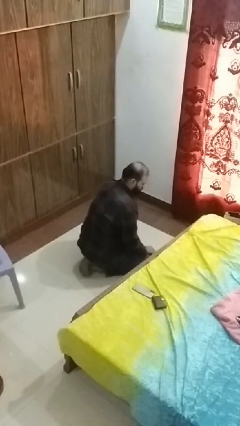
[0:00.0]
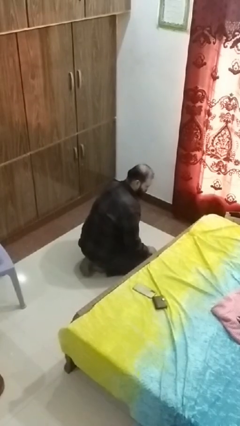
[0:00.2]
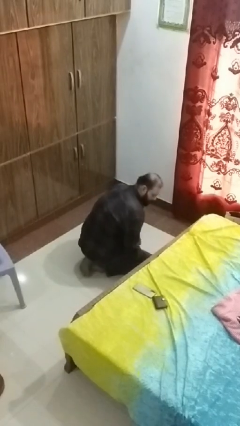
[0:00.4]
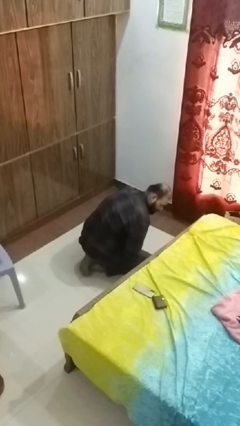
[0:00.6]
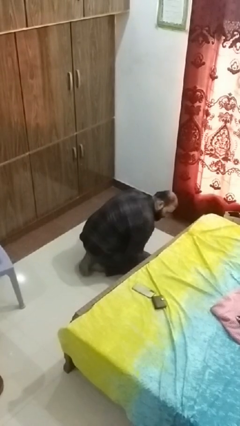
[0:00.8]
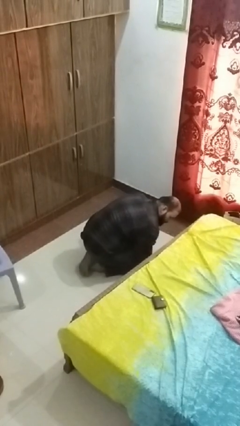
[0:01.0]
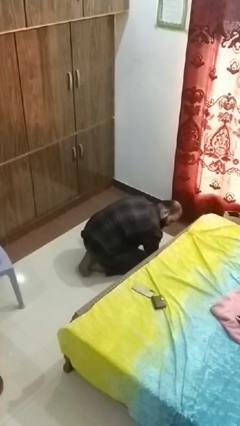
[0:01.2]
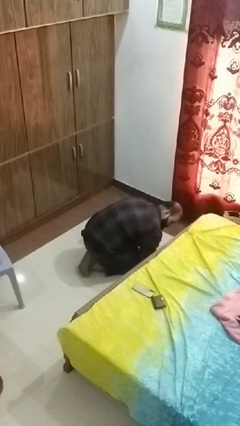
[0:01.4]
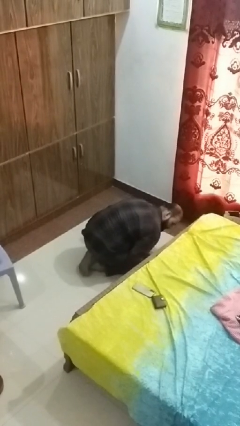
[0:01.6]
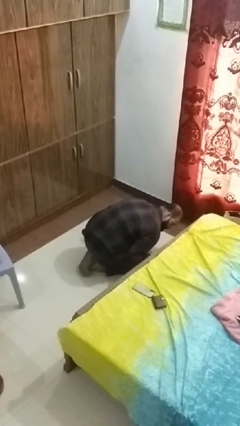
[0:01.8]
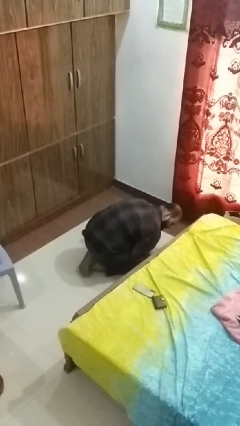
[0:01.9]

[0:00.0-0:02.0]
person searches under bed

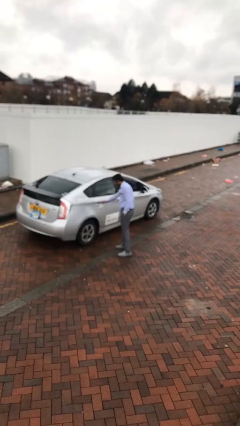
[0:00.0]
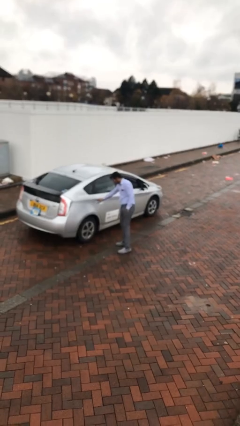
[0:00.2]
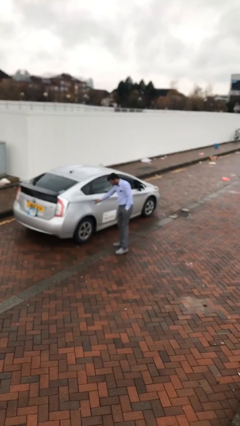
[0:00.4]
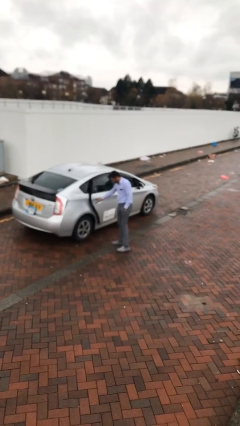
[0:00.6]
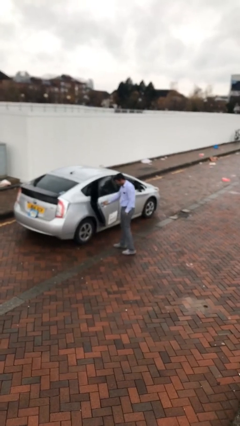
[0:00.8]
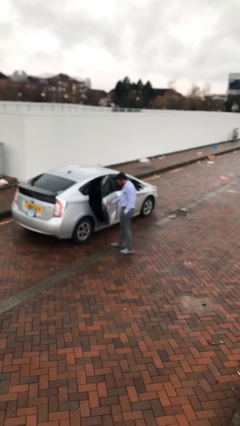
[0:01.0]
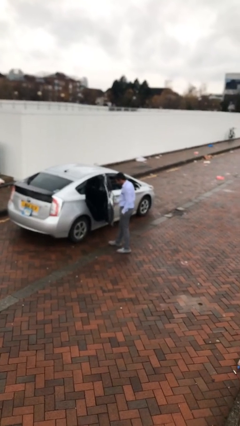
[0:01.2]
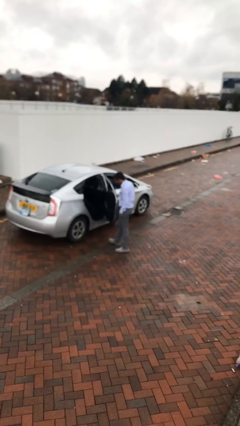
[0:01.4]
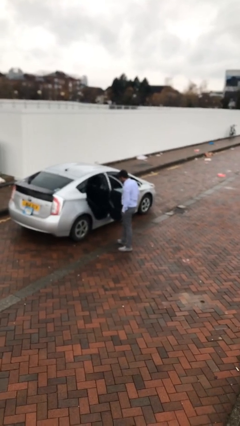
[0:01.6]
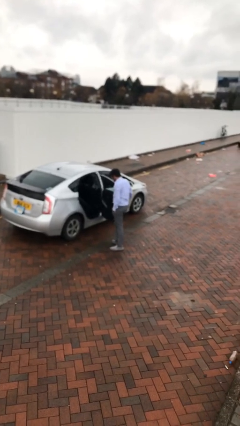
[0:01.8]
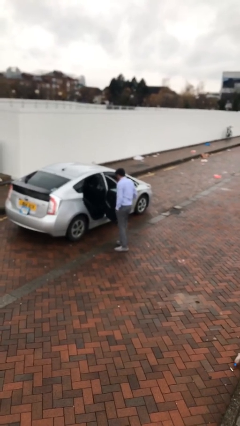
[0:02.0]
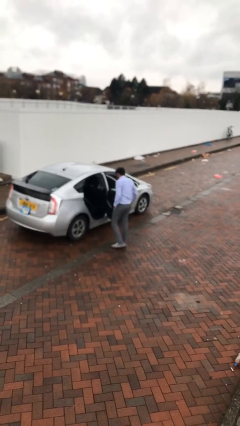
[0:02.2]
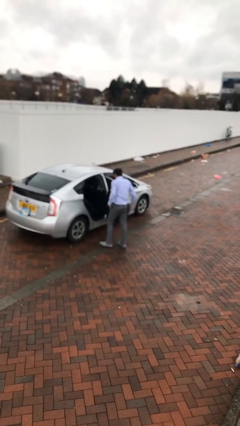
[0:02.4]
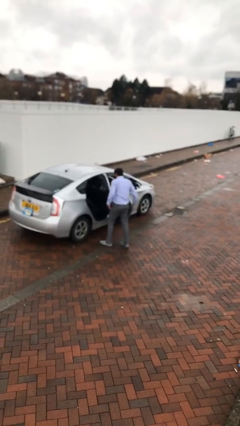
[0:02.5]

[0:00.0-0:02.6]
person opens car door

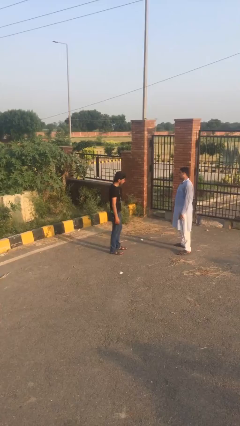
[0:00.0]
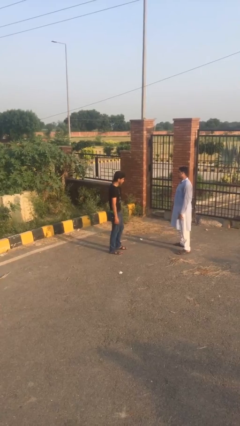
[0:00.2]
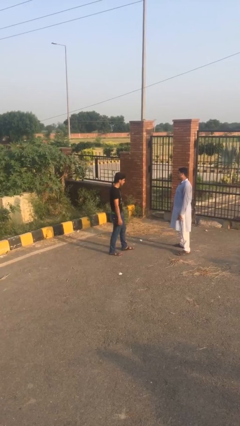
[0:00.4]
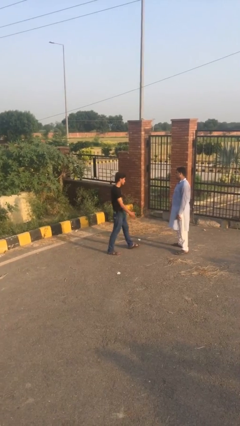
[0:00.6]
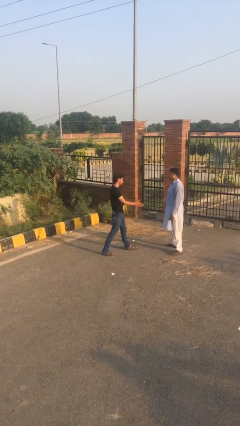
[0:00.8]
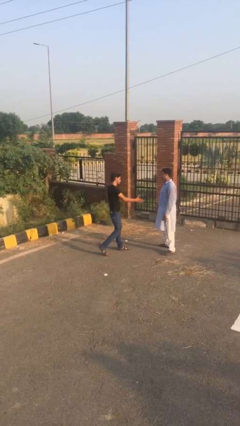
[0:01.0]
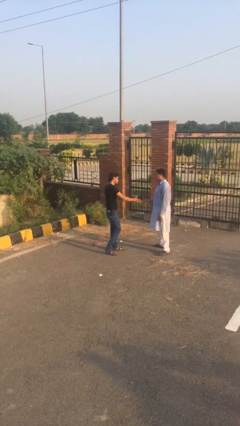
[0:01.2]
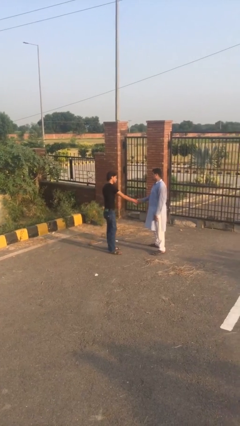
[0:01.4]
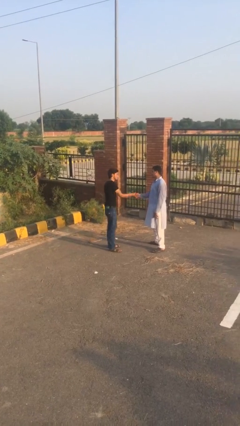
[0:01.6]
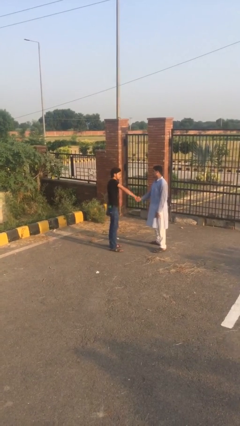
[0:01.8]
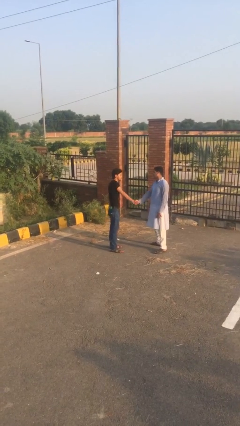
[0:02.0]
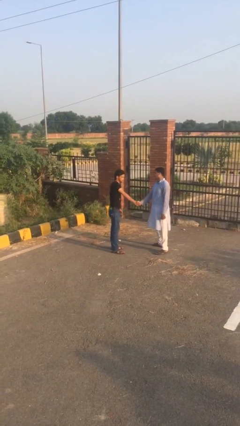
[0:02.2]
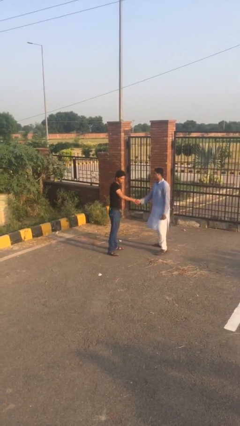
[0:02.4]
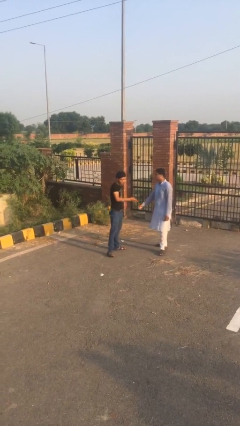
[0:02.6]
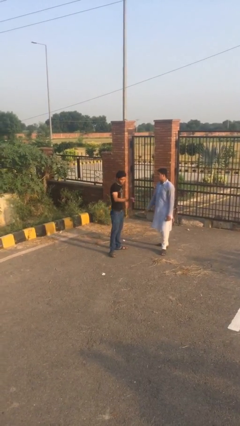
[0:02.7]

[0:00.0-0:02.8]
person shakes hand

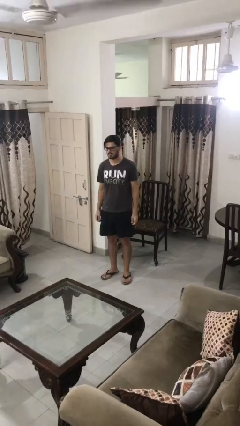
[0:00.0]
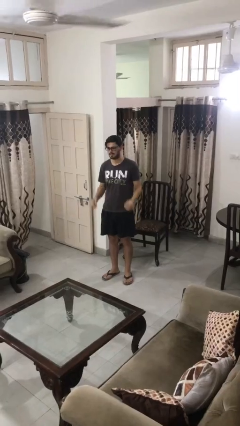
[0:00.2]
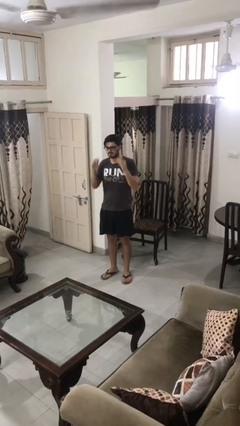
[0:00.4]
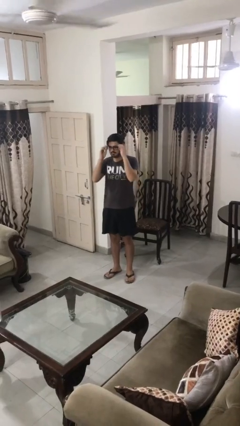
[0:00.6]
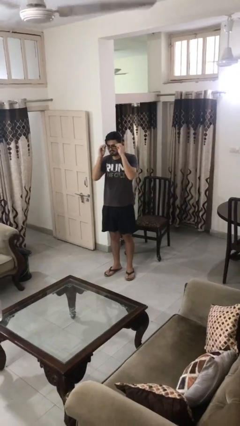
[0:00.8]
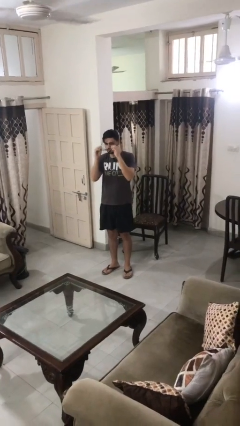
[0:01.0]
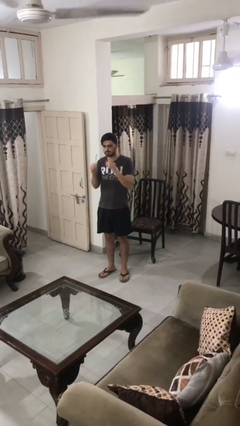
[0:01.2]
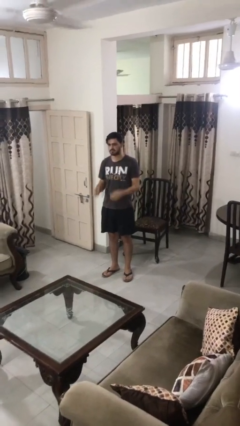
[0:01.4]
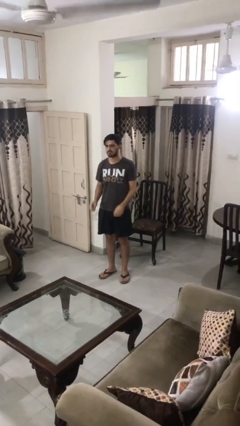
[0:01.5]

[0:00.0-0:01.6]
person takes off glasses

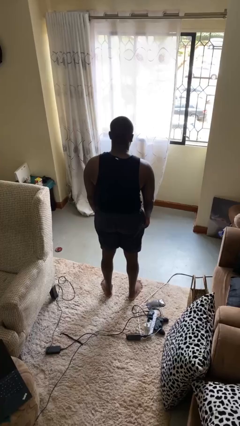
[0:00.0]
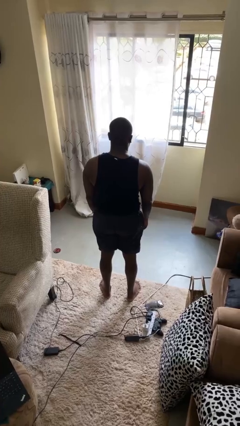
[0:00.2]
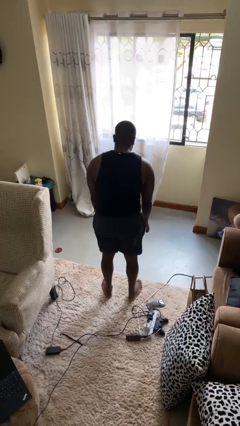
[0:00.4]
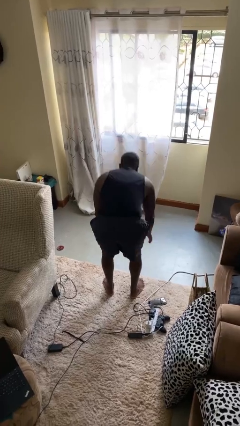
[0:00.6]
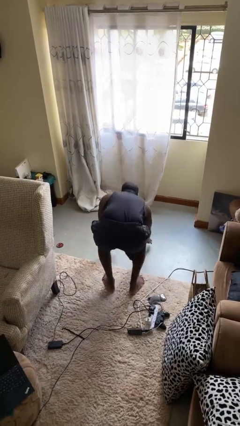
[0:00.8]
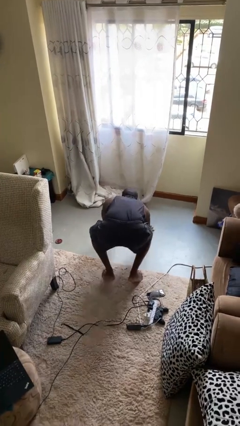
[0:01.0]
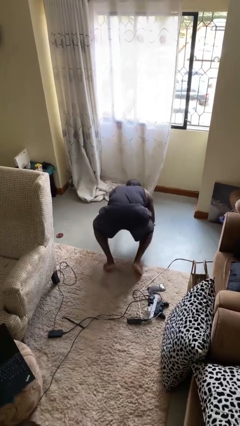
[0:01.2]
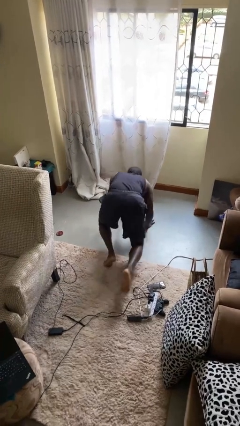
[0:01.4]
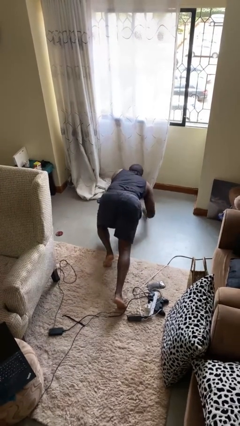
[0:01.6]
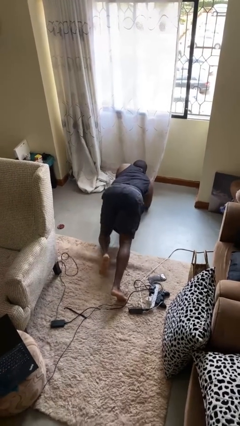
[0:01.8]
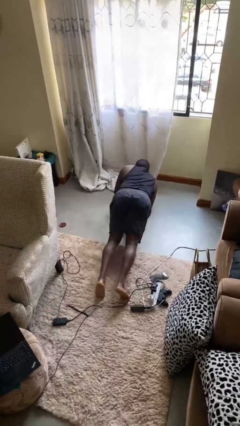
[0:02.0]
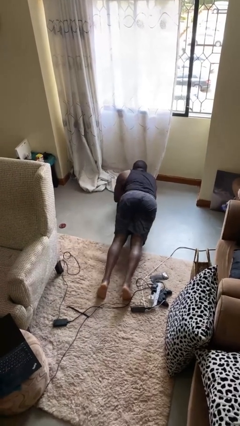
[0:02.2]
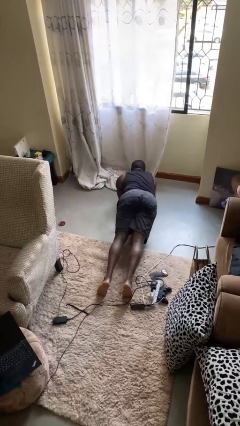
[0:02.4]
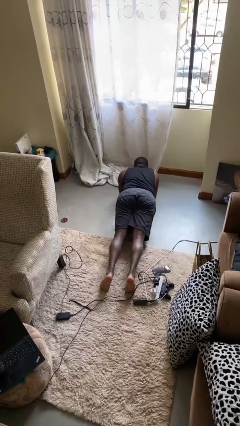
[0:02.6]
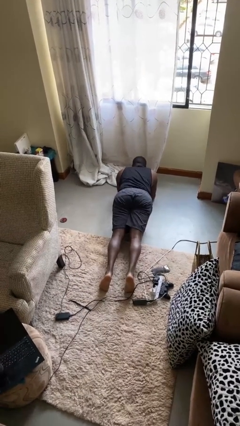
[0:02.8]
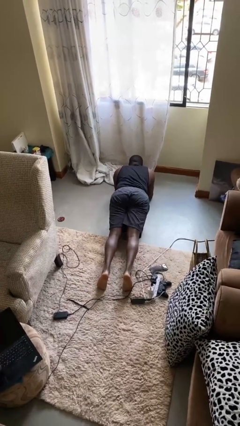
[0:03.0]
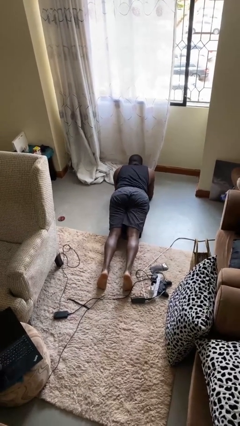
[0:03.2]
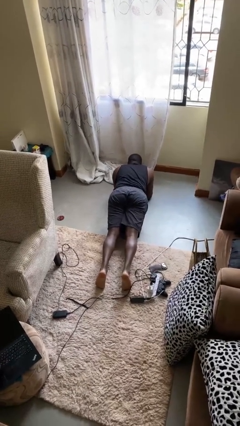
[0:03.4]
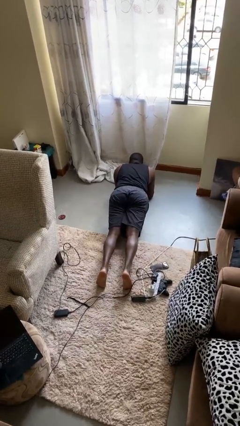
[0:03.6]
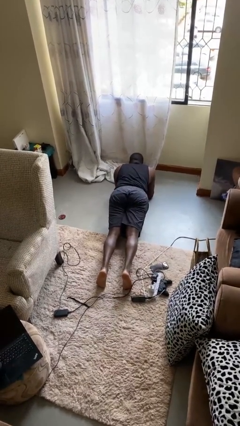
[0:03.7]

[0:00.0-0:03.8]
person exercises with plank

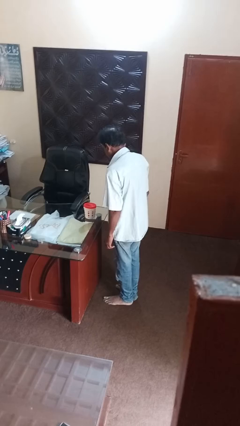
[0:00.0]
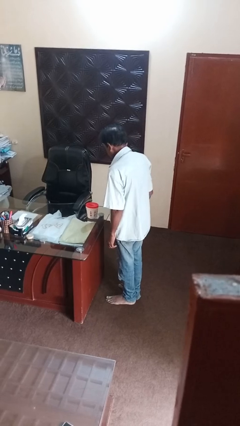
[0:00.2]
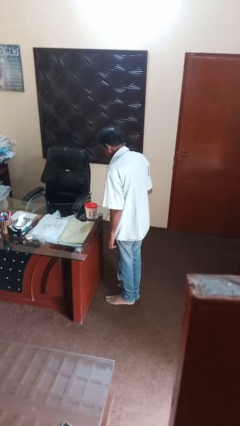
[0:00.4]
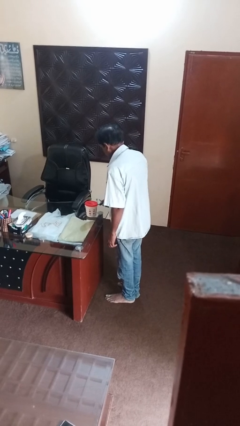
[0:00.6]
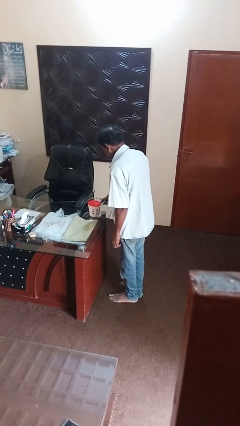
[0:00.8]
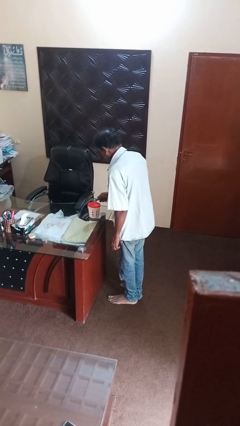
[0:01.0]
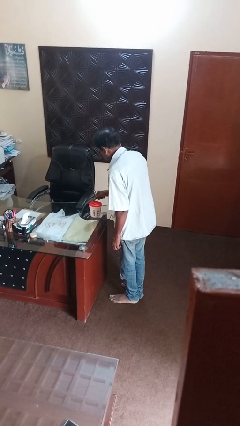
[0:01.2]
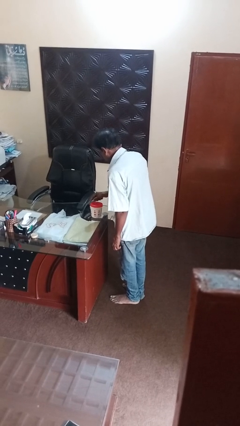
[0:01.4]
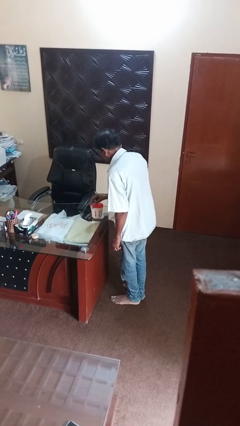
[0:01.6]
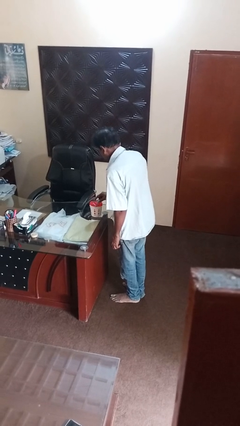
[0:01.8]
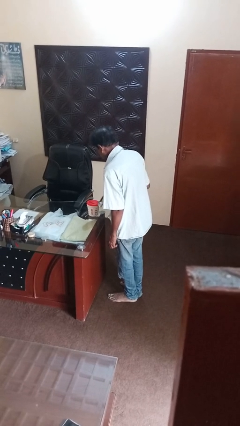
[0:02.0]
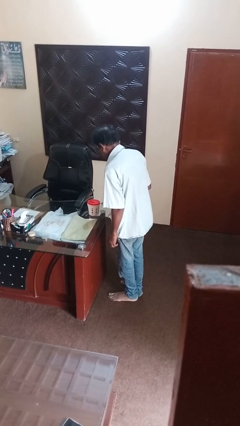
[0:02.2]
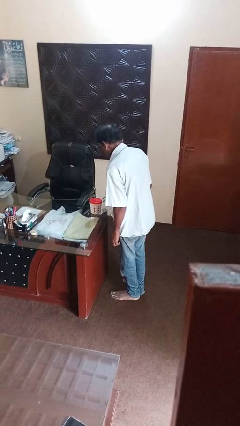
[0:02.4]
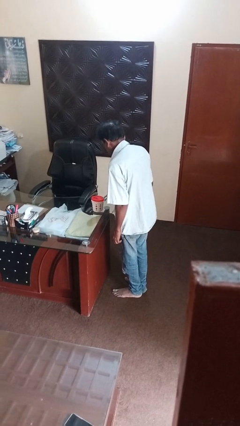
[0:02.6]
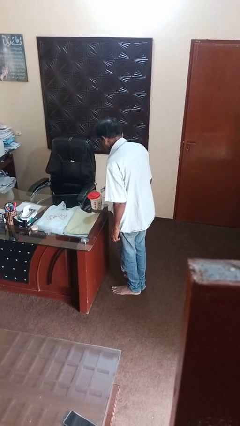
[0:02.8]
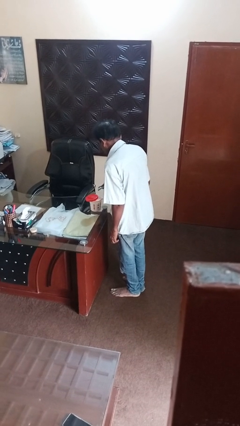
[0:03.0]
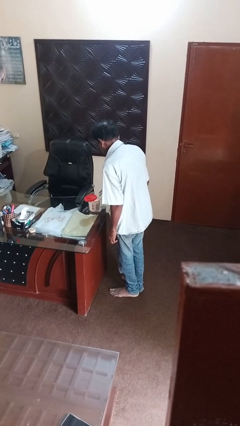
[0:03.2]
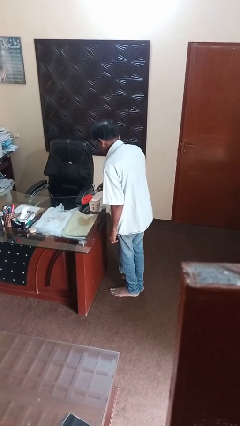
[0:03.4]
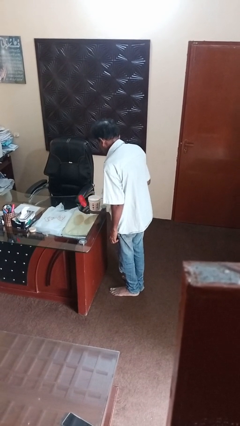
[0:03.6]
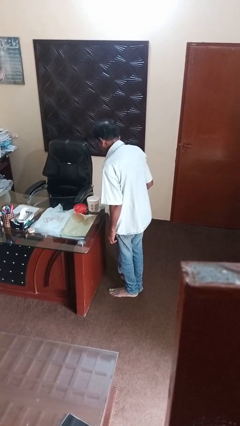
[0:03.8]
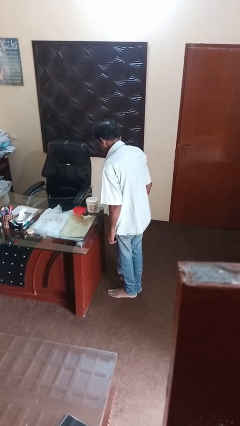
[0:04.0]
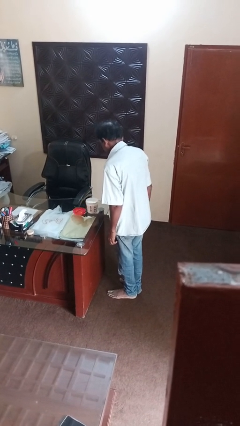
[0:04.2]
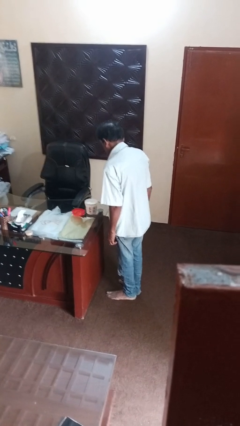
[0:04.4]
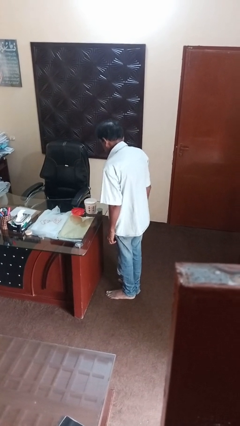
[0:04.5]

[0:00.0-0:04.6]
person opens can with can opener
